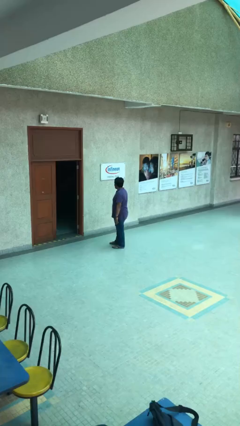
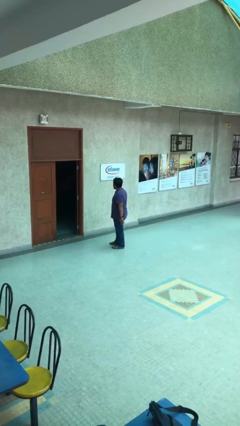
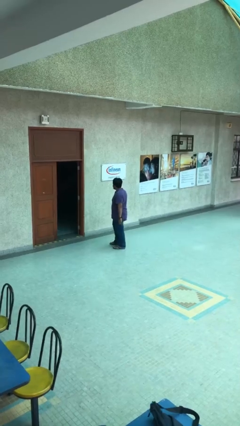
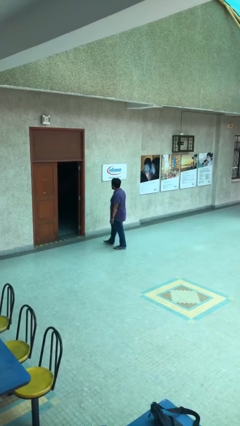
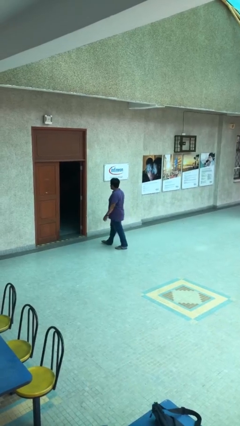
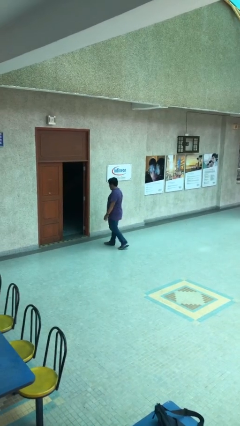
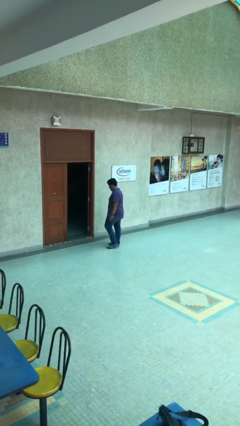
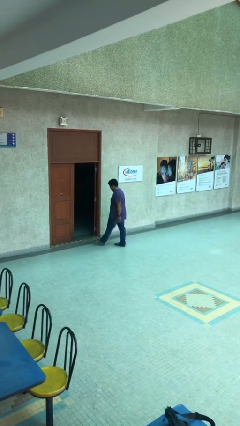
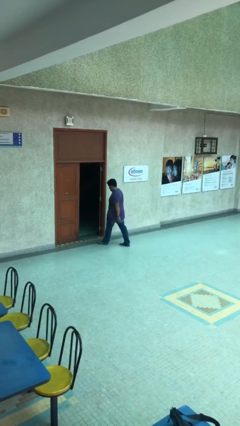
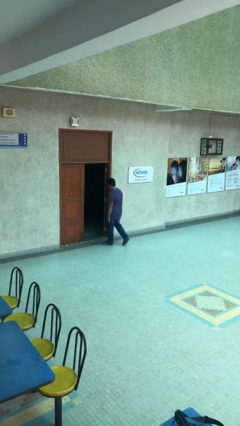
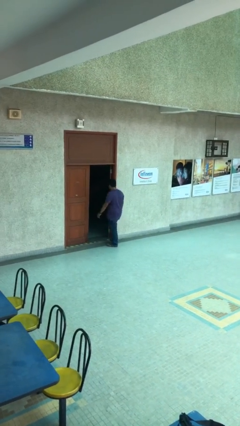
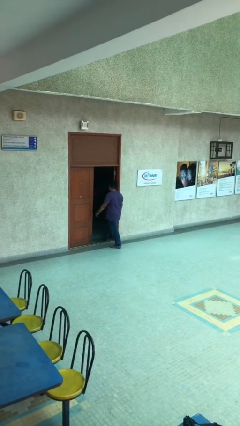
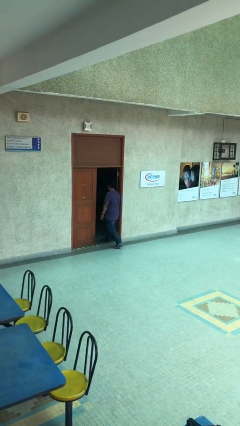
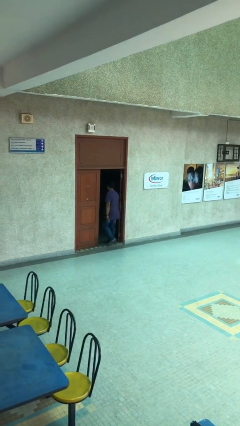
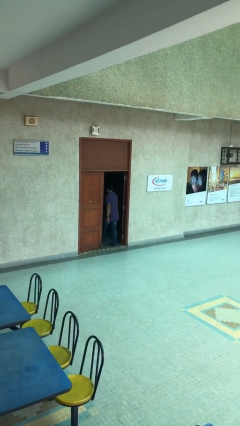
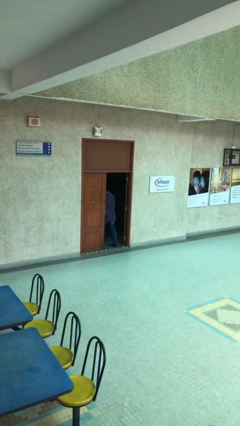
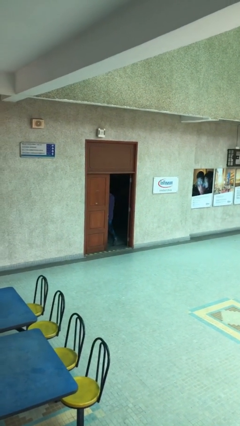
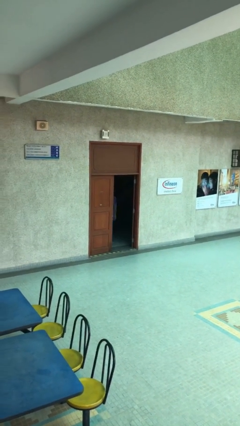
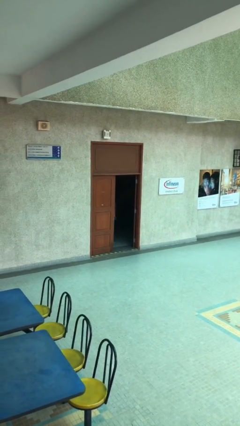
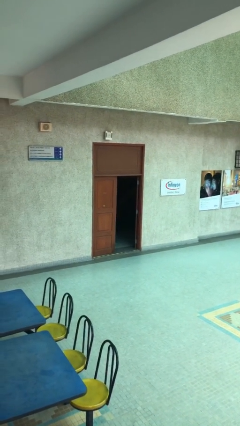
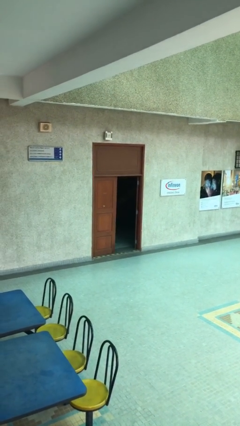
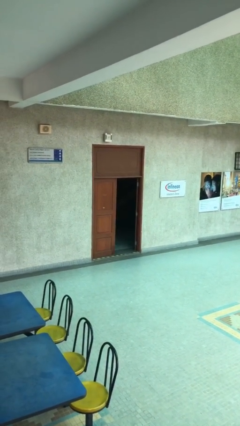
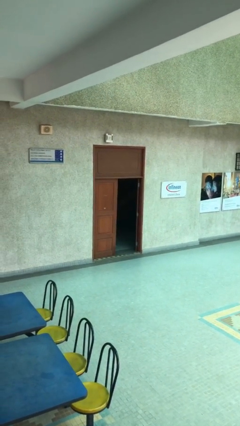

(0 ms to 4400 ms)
person exits scene through structure

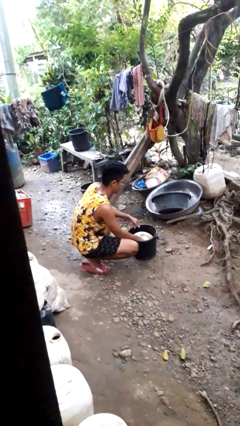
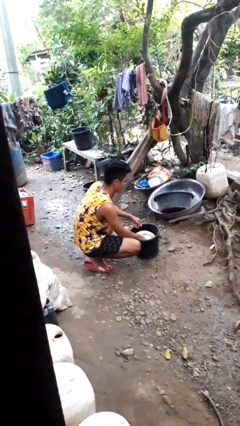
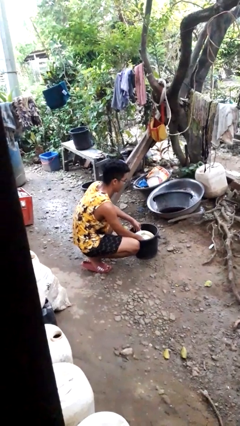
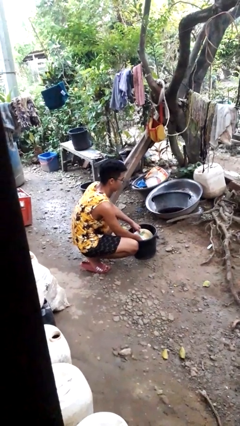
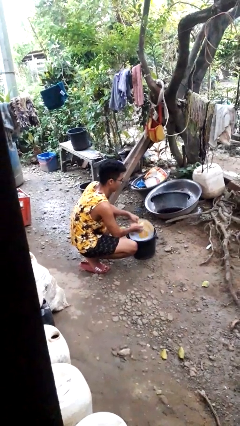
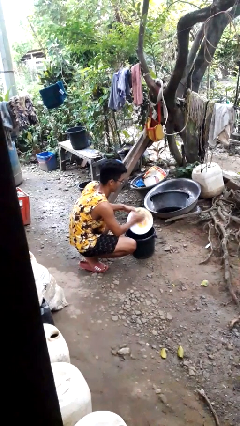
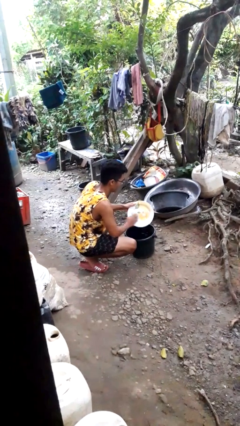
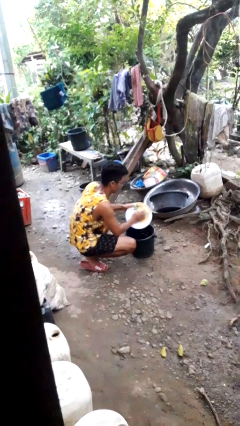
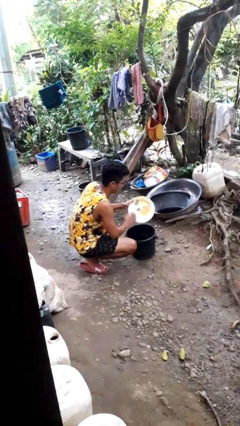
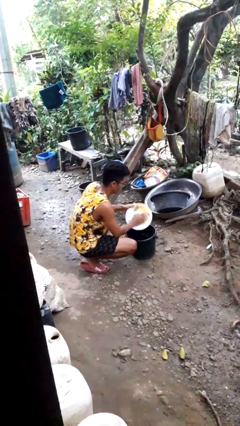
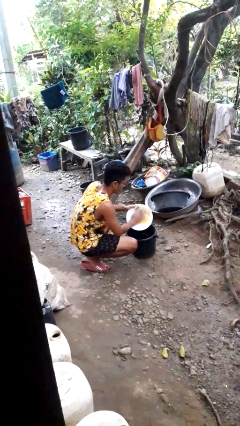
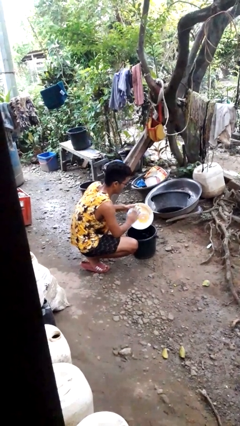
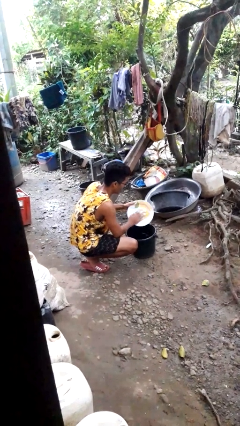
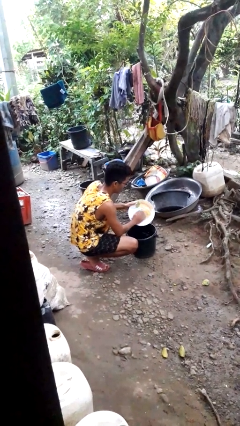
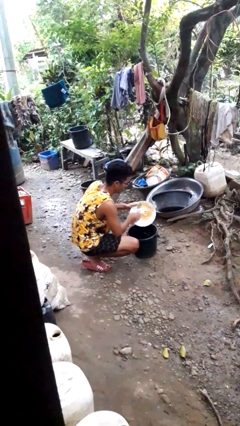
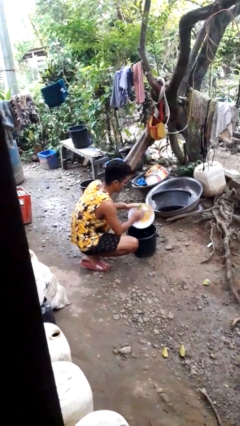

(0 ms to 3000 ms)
person washes dish

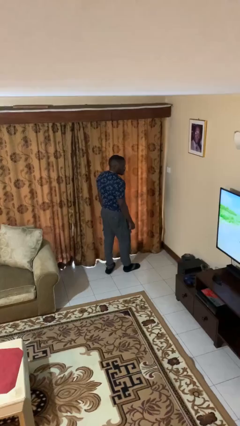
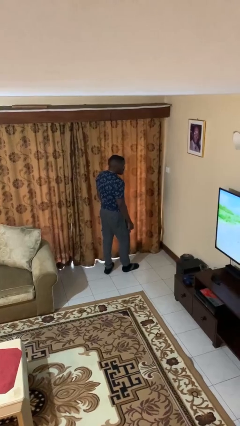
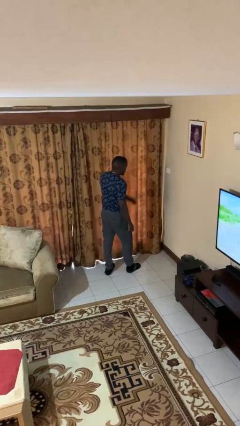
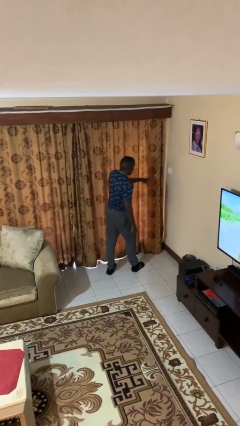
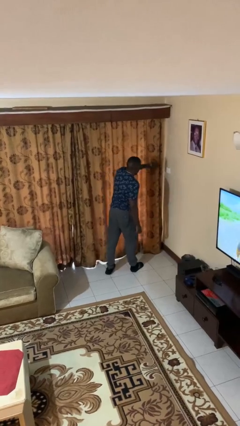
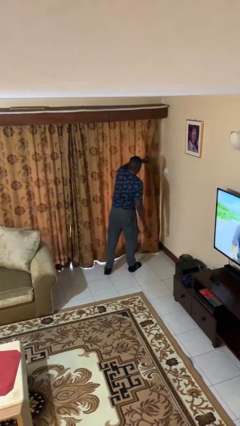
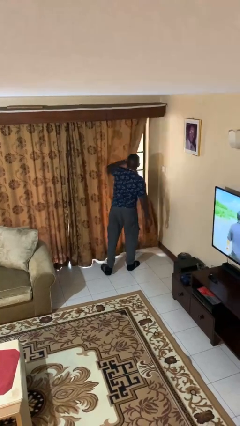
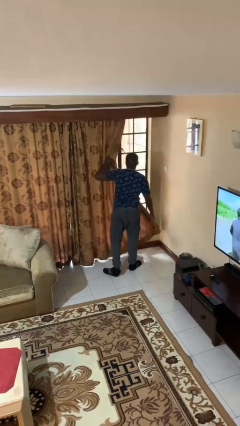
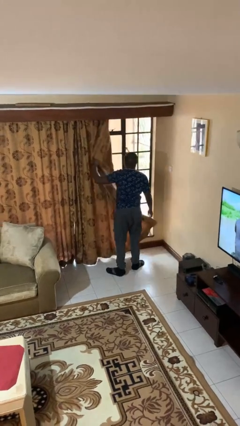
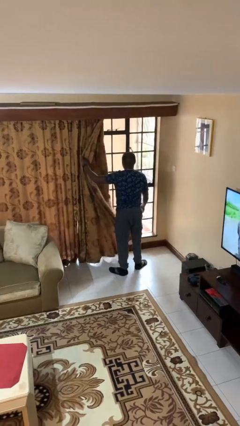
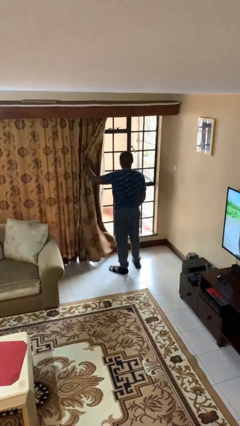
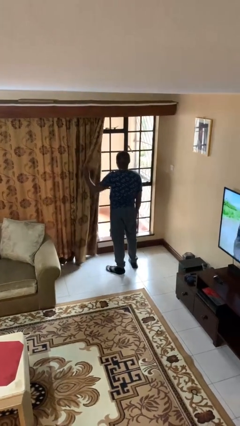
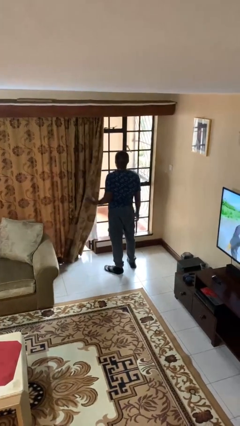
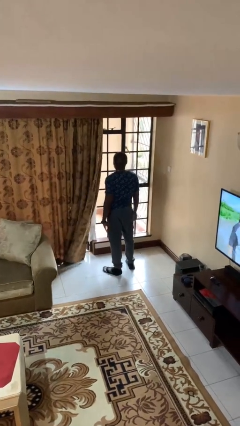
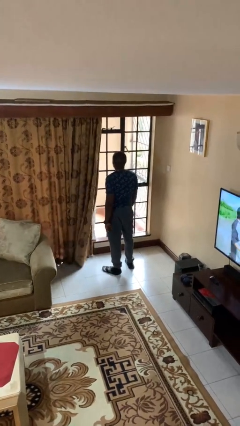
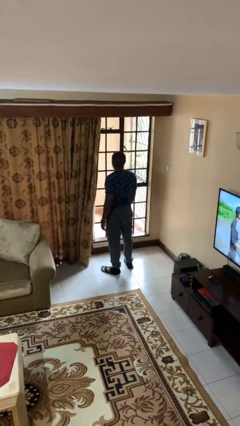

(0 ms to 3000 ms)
person opens curtains

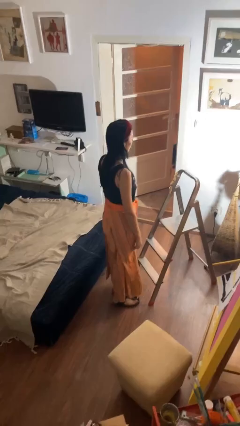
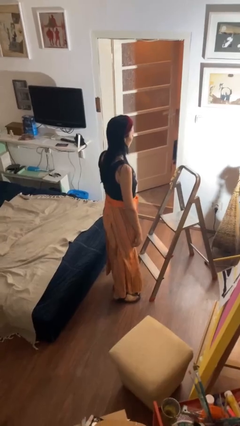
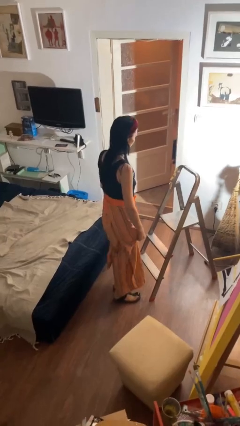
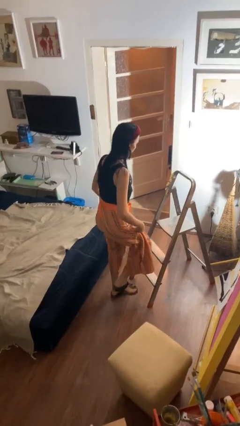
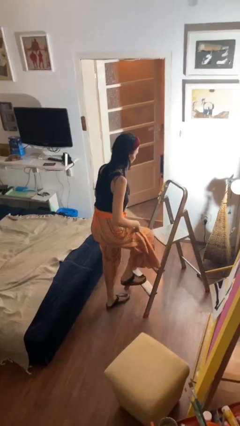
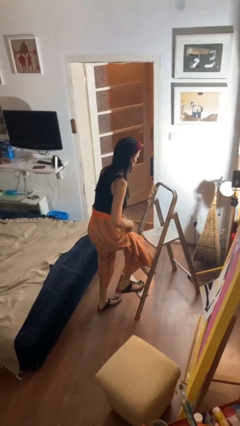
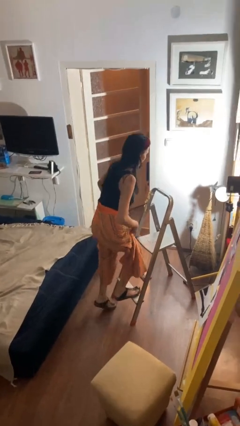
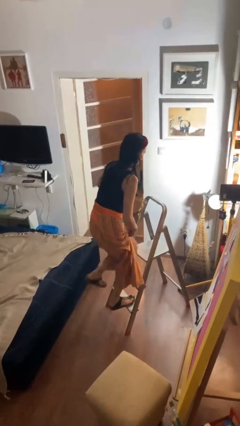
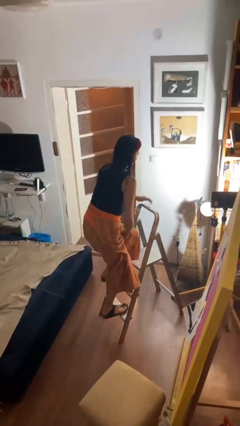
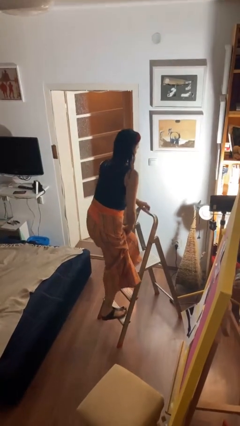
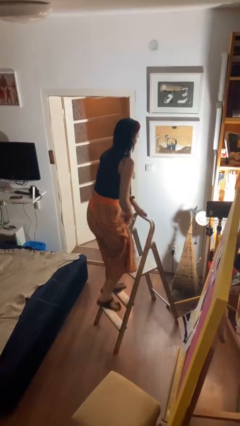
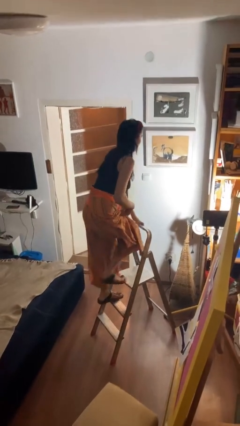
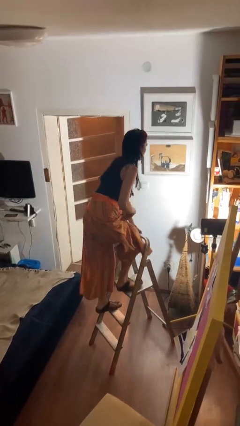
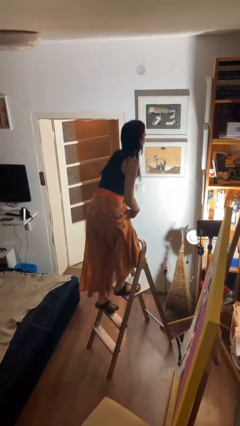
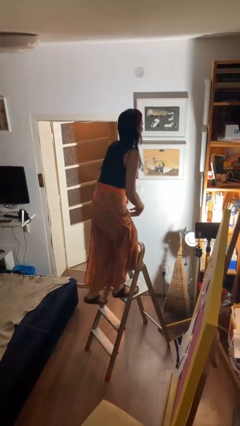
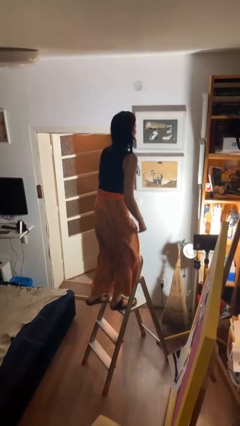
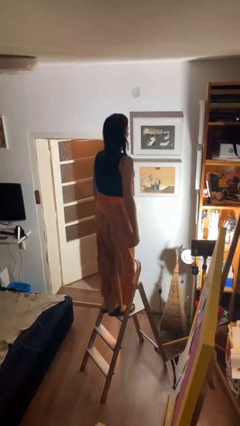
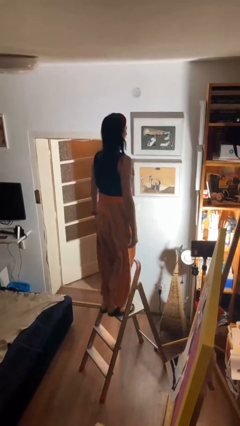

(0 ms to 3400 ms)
person climbs up ladder

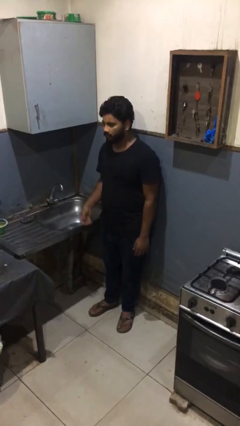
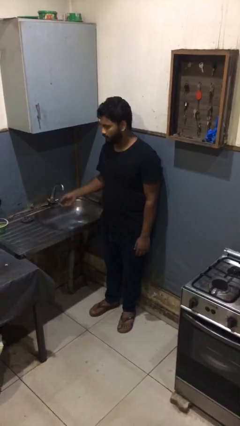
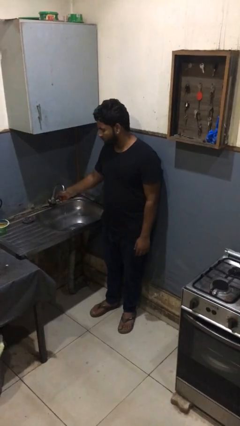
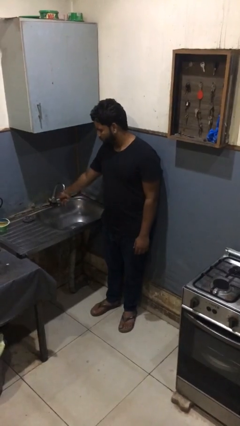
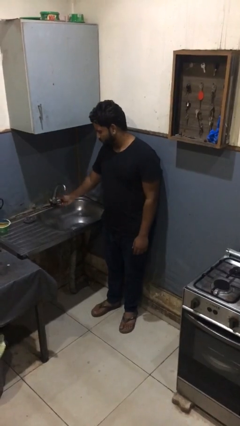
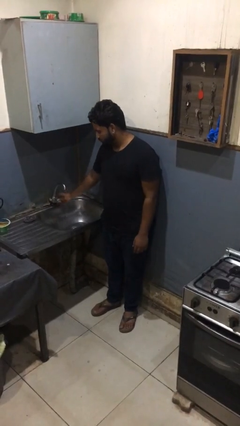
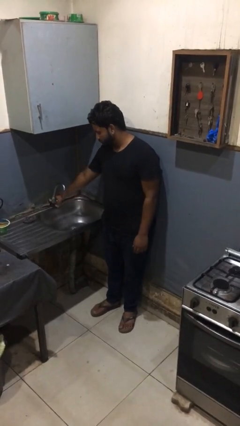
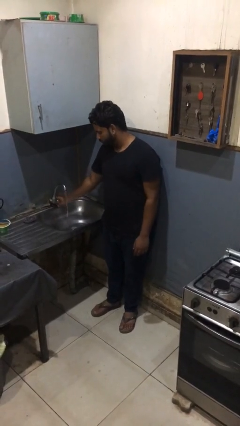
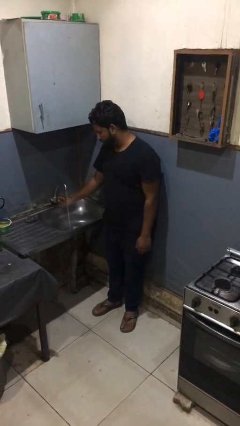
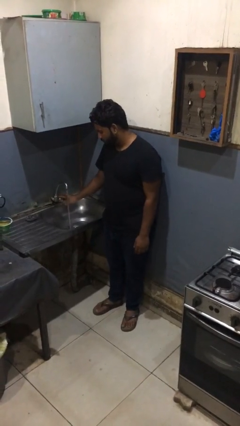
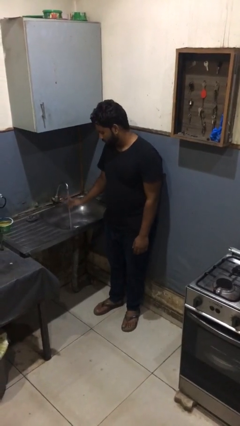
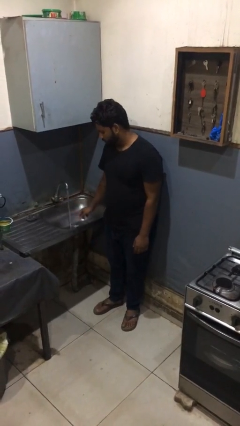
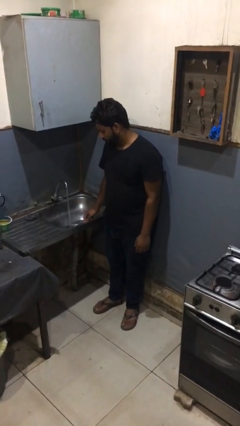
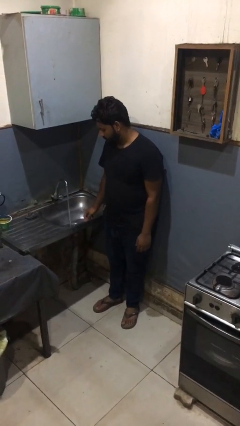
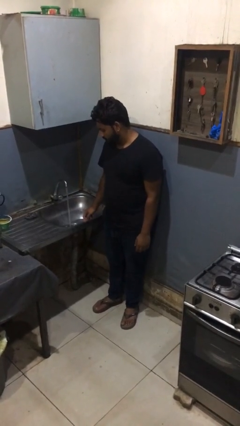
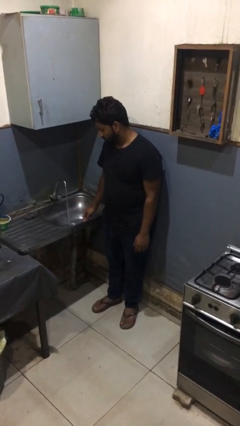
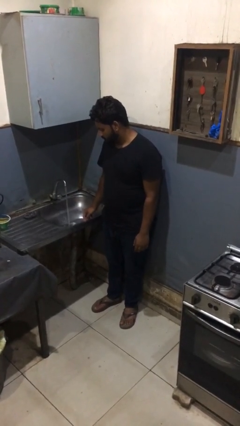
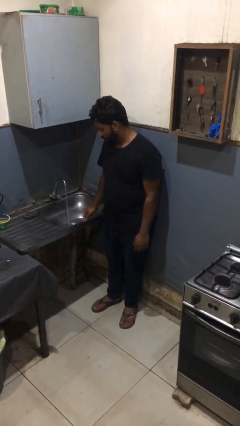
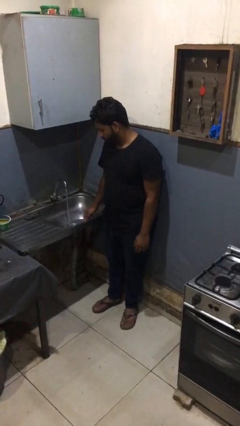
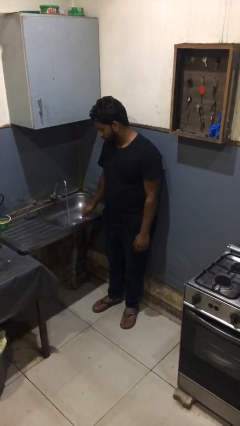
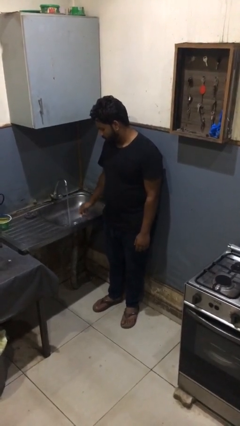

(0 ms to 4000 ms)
person turns on faucet
